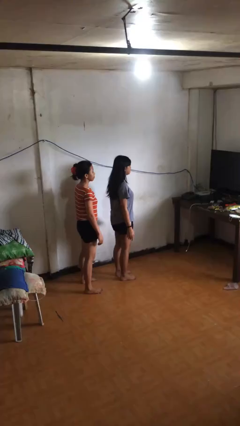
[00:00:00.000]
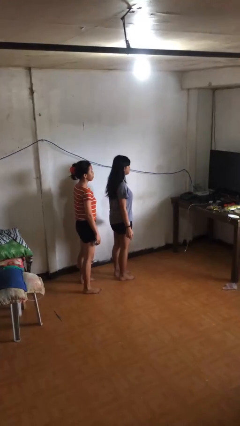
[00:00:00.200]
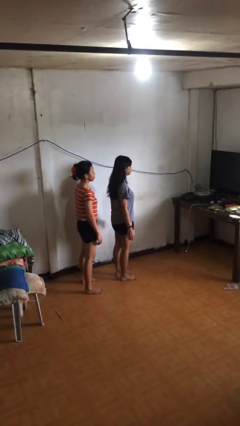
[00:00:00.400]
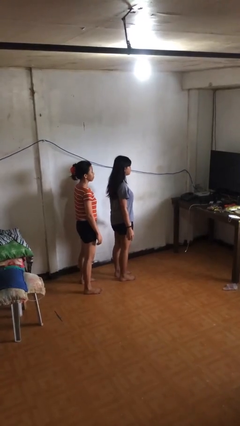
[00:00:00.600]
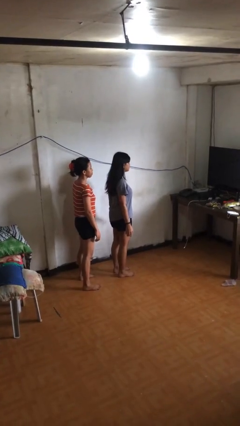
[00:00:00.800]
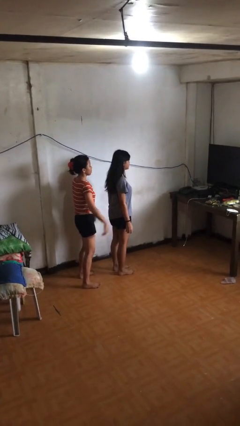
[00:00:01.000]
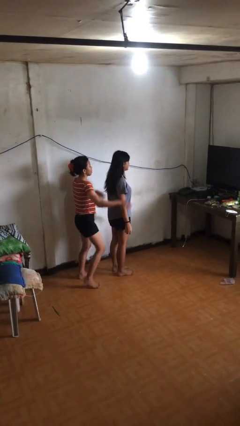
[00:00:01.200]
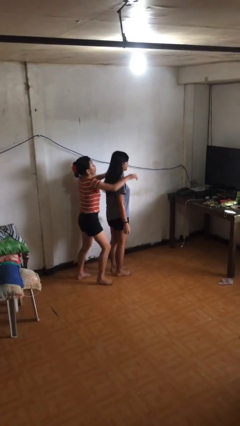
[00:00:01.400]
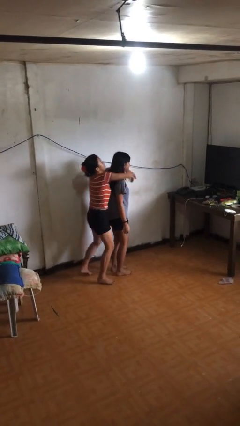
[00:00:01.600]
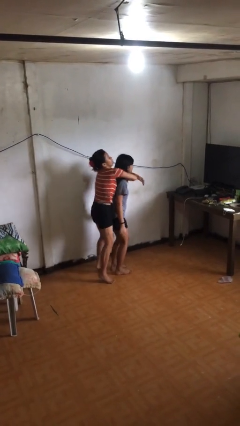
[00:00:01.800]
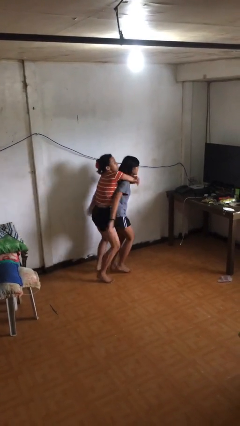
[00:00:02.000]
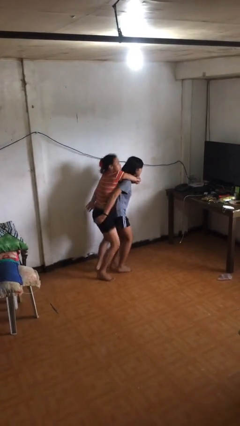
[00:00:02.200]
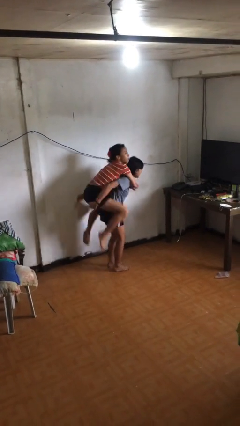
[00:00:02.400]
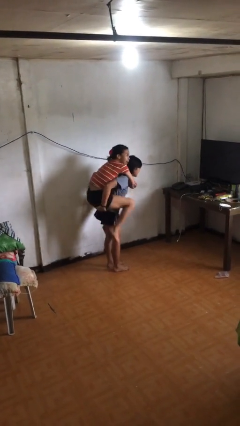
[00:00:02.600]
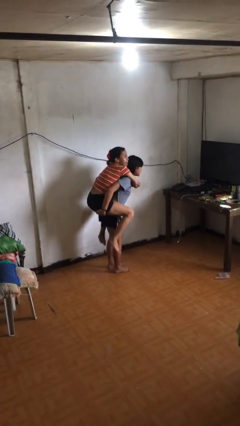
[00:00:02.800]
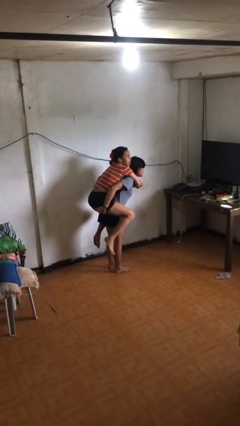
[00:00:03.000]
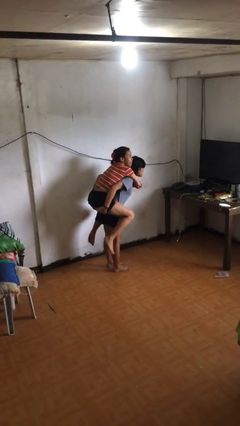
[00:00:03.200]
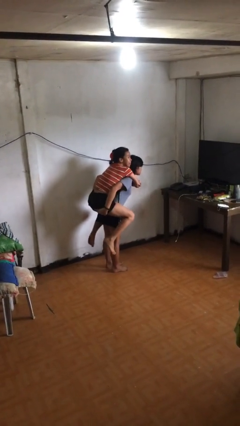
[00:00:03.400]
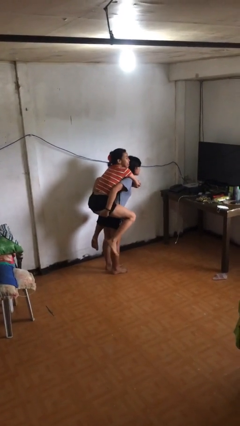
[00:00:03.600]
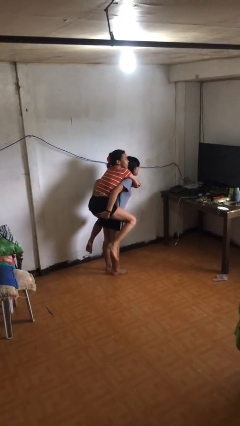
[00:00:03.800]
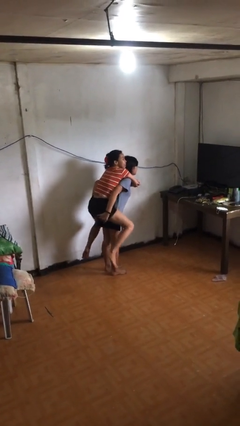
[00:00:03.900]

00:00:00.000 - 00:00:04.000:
person carries person over shoulder

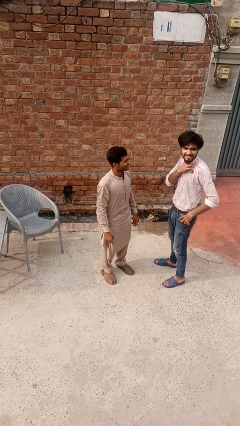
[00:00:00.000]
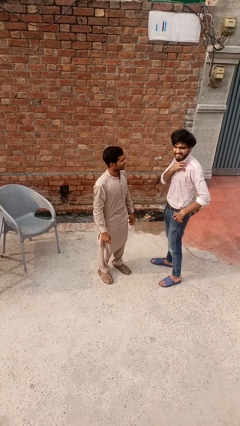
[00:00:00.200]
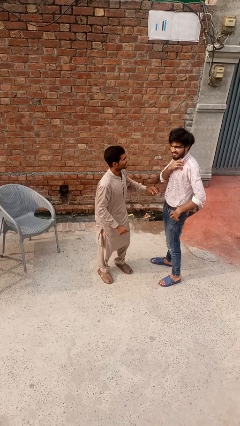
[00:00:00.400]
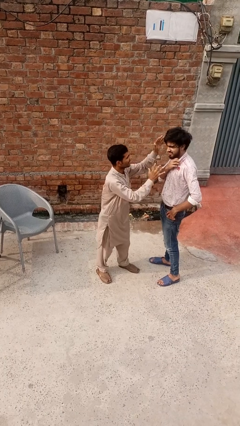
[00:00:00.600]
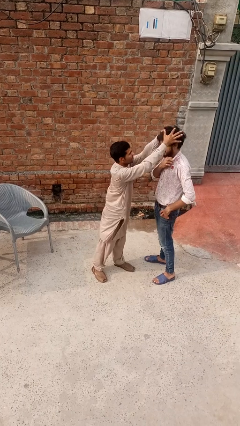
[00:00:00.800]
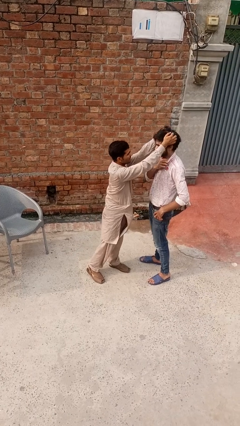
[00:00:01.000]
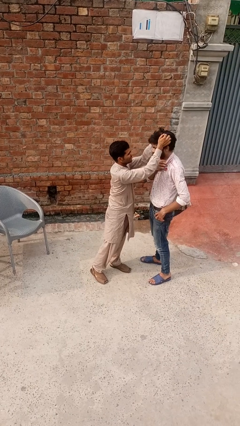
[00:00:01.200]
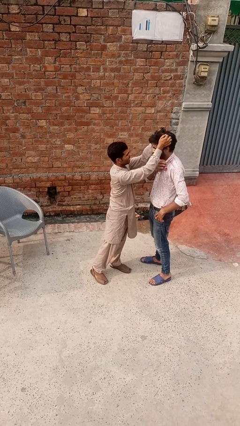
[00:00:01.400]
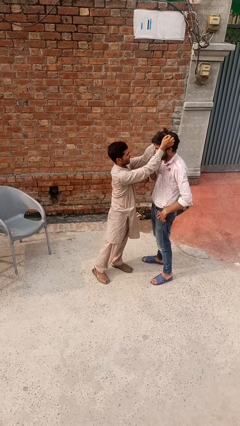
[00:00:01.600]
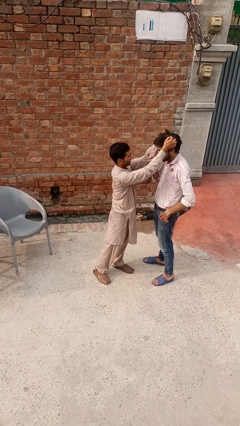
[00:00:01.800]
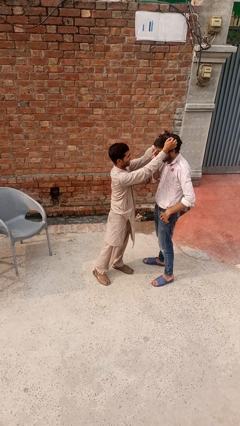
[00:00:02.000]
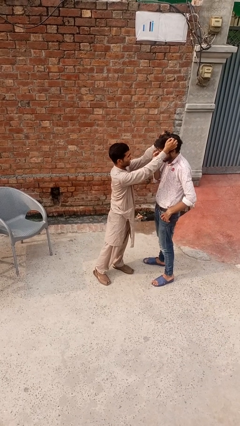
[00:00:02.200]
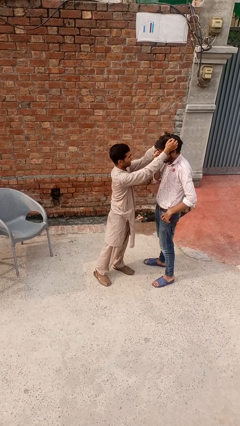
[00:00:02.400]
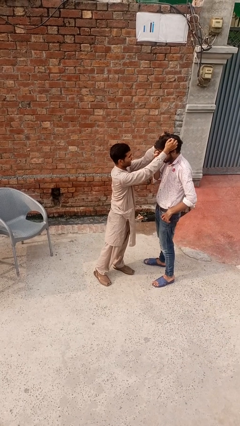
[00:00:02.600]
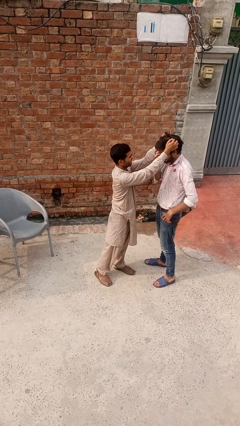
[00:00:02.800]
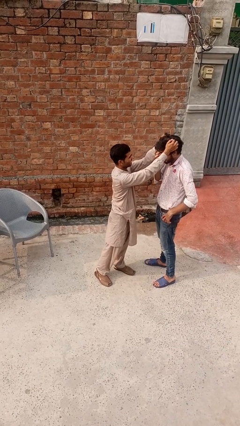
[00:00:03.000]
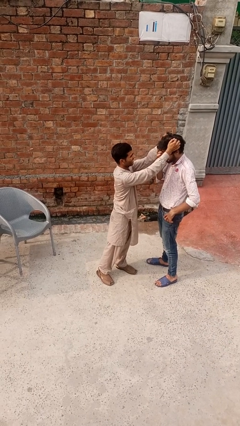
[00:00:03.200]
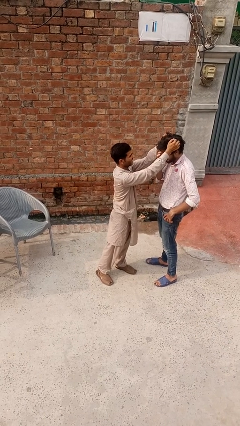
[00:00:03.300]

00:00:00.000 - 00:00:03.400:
person grabs person by hair

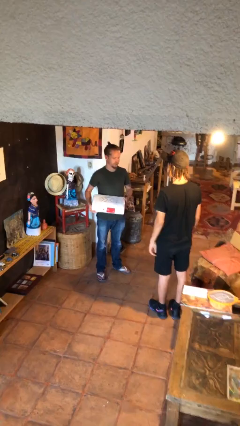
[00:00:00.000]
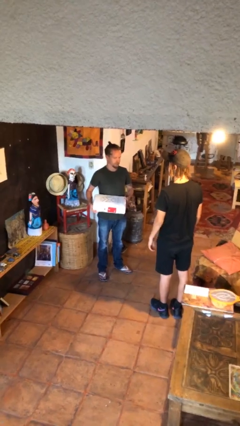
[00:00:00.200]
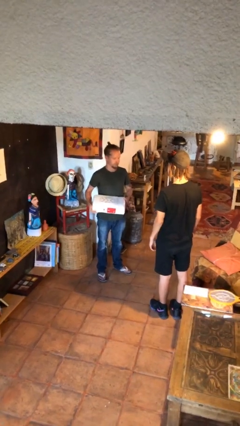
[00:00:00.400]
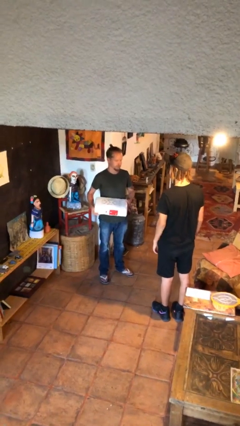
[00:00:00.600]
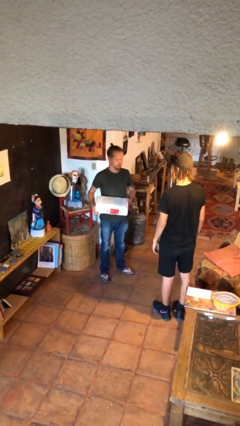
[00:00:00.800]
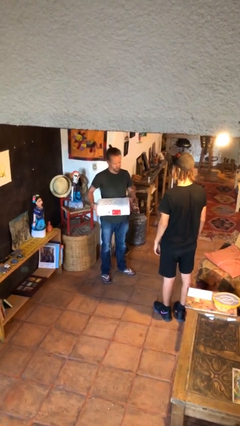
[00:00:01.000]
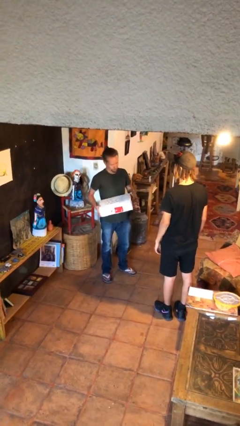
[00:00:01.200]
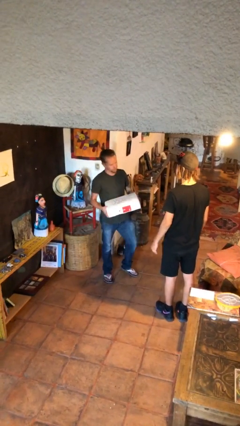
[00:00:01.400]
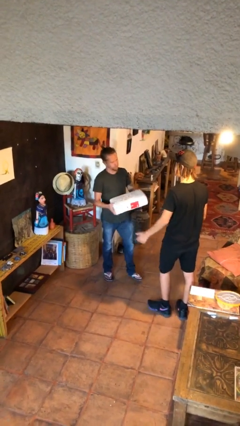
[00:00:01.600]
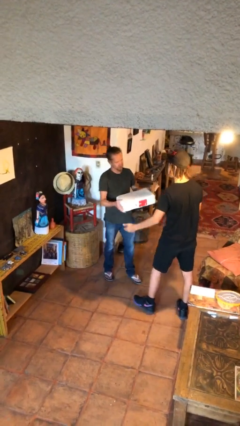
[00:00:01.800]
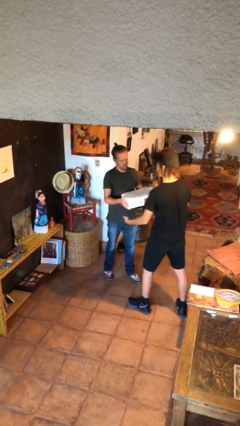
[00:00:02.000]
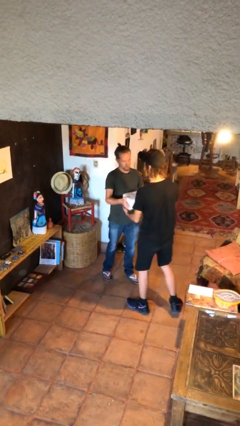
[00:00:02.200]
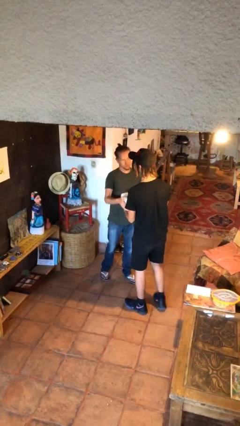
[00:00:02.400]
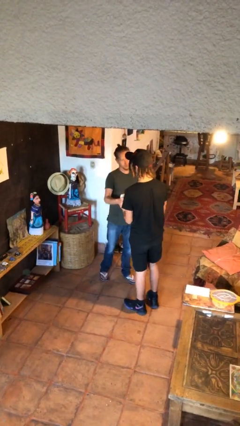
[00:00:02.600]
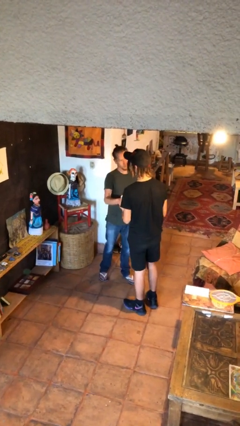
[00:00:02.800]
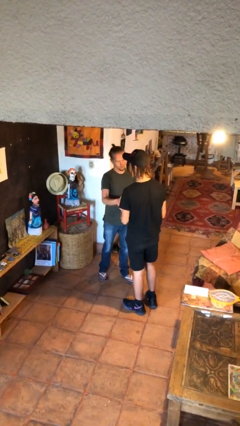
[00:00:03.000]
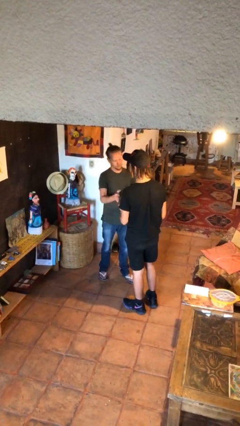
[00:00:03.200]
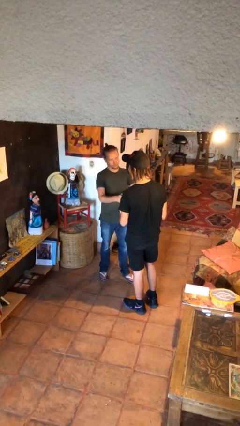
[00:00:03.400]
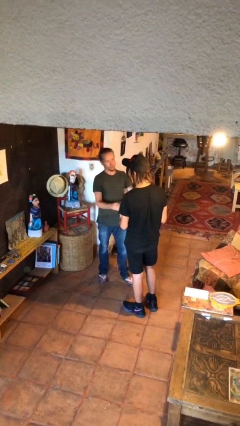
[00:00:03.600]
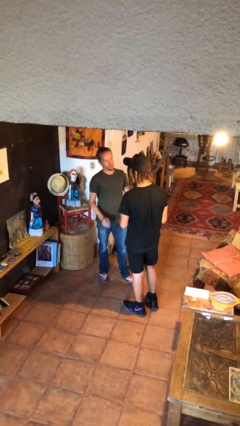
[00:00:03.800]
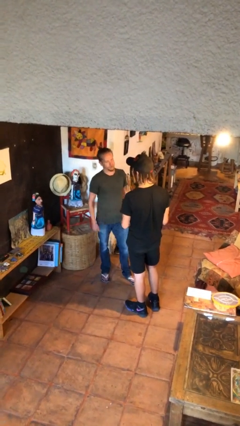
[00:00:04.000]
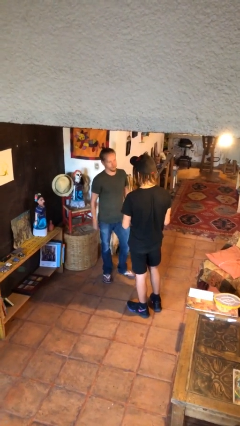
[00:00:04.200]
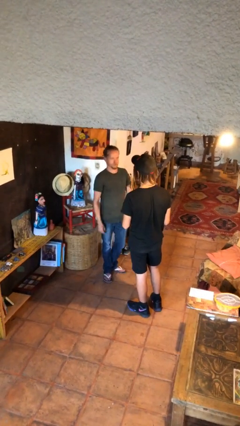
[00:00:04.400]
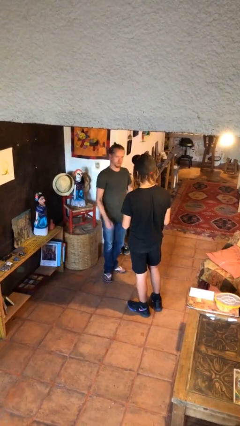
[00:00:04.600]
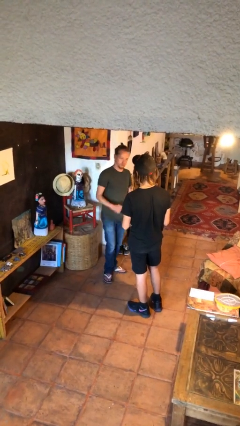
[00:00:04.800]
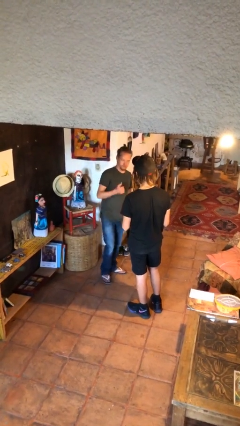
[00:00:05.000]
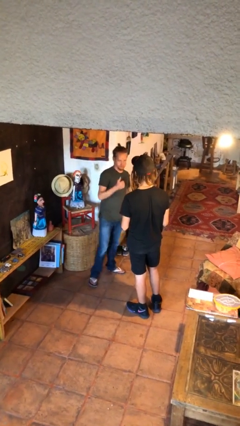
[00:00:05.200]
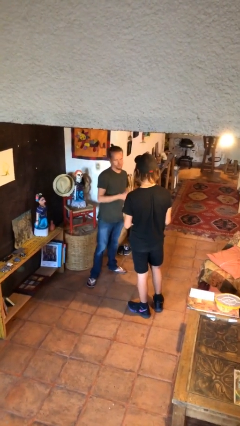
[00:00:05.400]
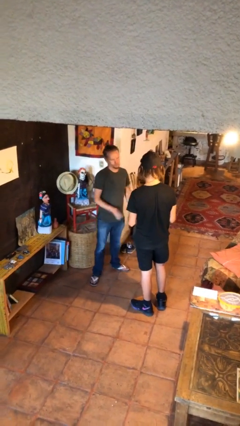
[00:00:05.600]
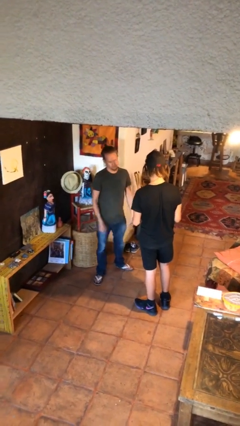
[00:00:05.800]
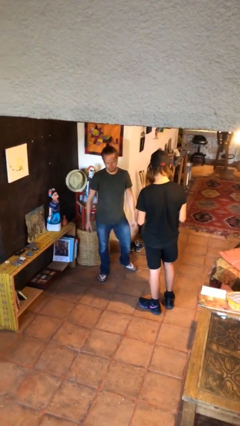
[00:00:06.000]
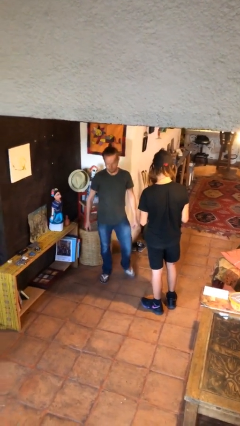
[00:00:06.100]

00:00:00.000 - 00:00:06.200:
person transfers object to person

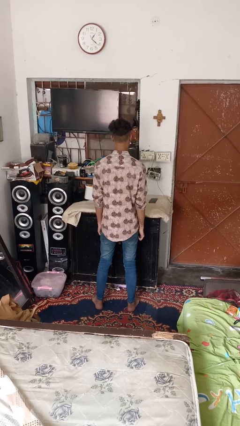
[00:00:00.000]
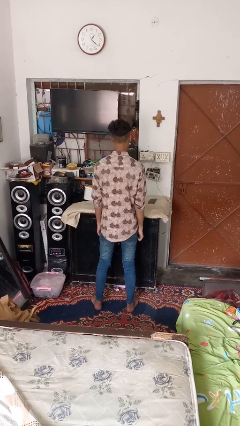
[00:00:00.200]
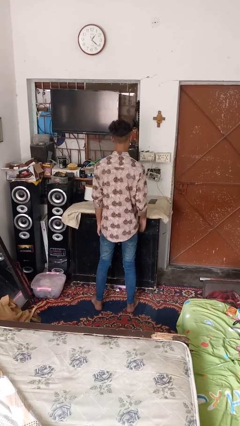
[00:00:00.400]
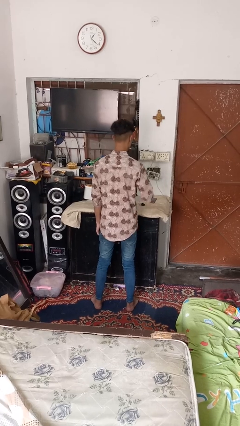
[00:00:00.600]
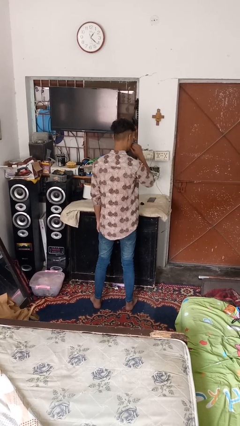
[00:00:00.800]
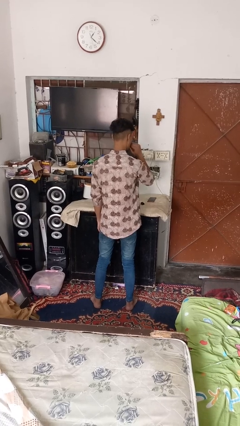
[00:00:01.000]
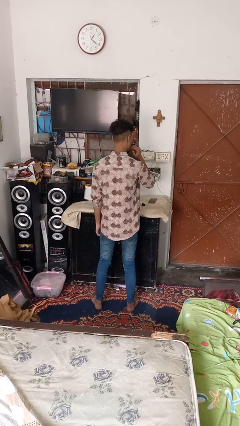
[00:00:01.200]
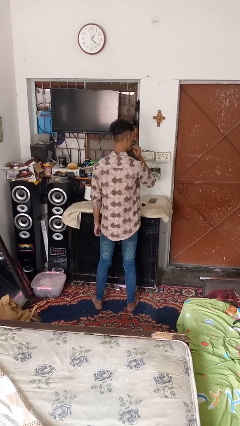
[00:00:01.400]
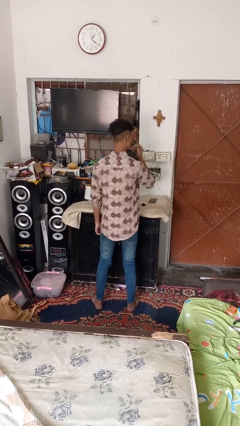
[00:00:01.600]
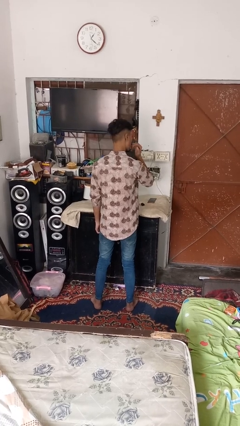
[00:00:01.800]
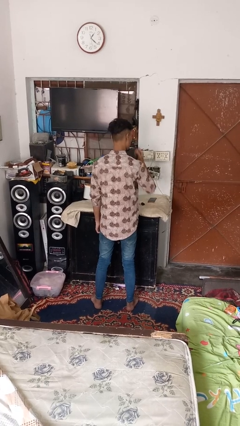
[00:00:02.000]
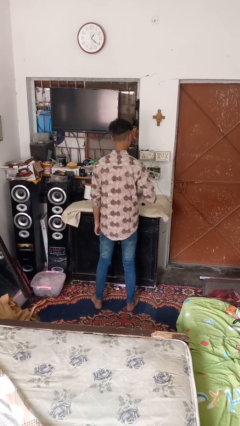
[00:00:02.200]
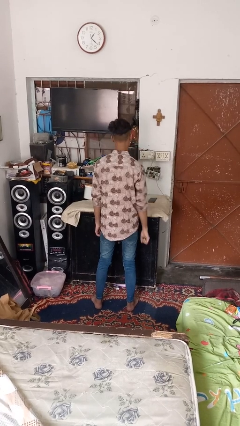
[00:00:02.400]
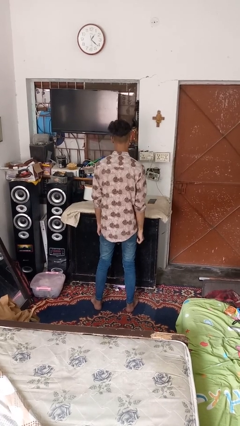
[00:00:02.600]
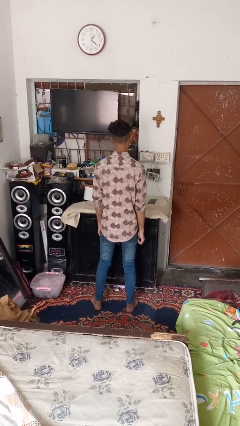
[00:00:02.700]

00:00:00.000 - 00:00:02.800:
person licks fingers

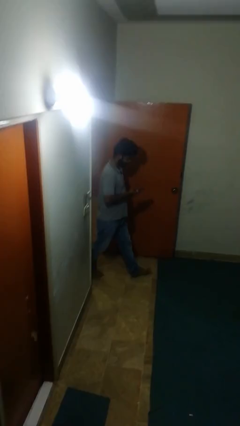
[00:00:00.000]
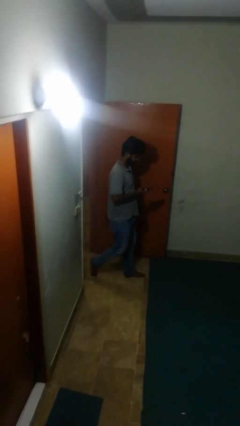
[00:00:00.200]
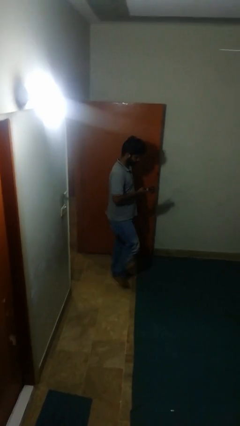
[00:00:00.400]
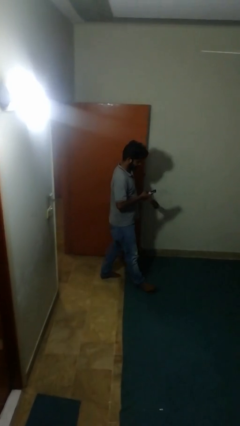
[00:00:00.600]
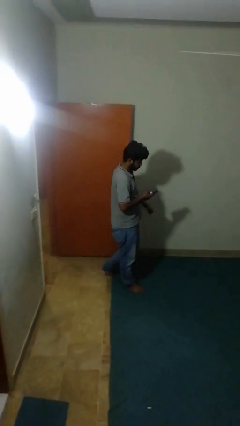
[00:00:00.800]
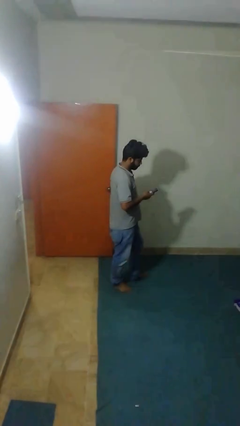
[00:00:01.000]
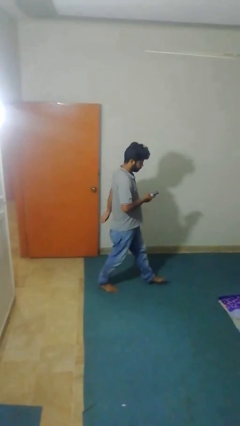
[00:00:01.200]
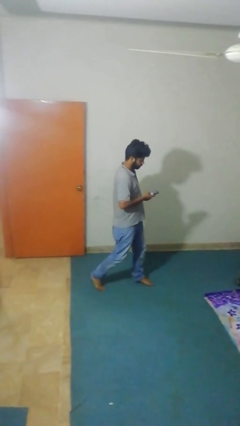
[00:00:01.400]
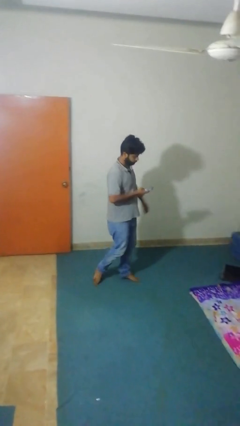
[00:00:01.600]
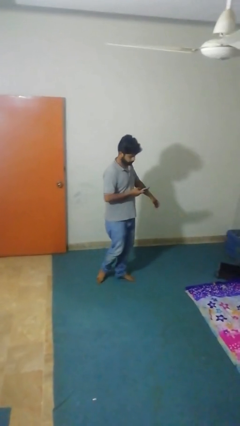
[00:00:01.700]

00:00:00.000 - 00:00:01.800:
person enters scene through structure
